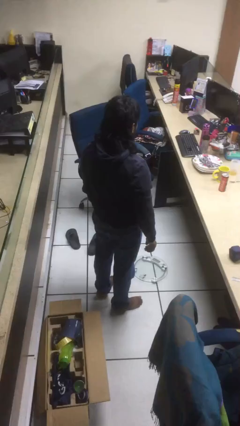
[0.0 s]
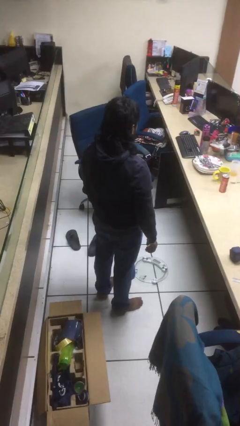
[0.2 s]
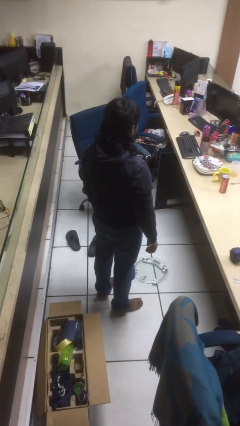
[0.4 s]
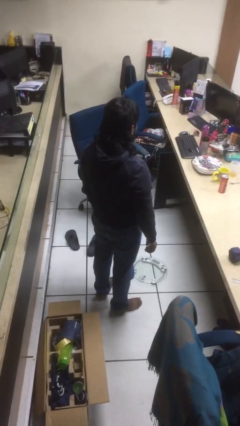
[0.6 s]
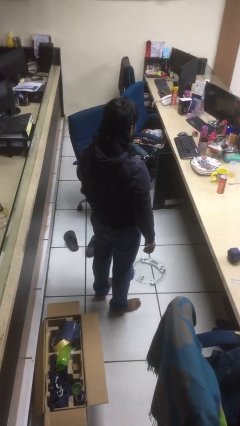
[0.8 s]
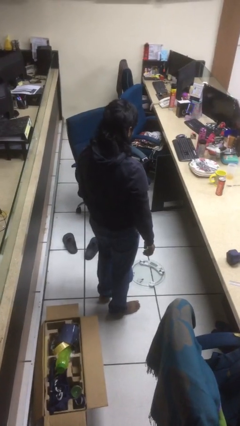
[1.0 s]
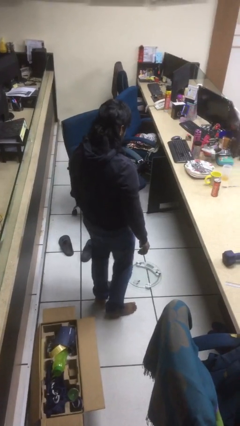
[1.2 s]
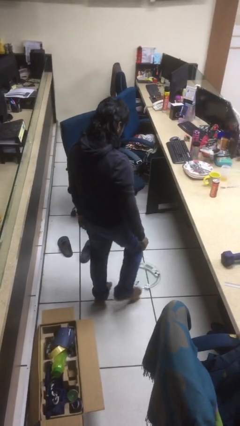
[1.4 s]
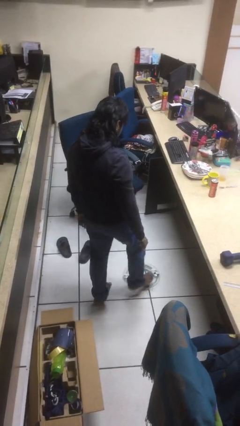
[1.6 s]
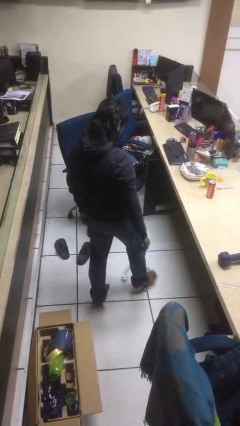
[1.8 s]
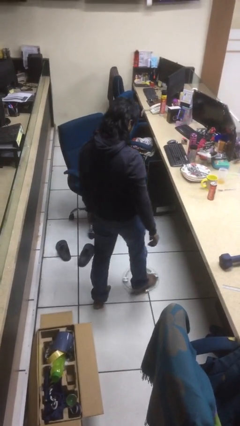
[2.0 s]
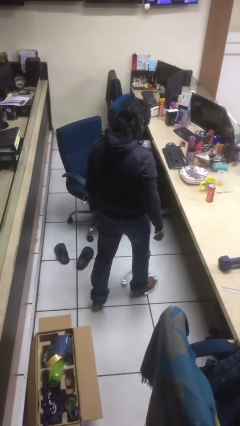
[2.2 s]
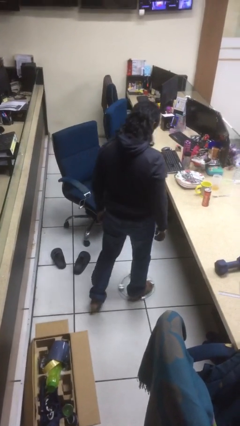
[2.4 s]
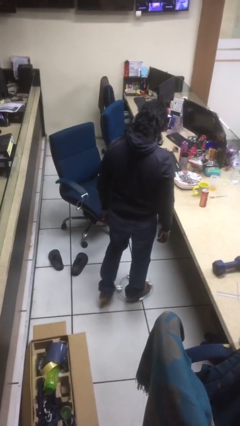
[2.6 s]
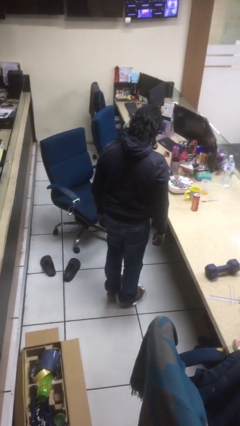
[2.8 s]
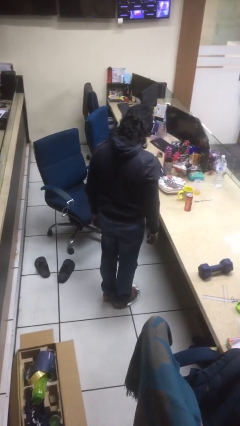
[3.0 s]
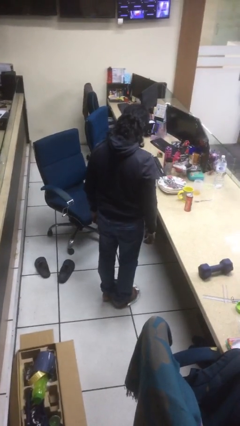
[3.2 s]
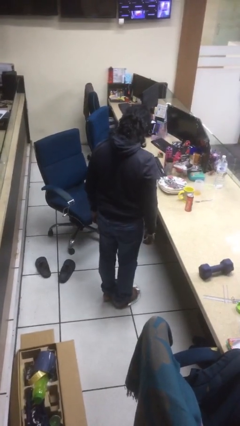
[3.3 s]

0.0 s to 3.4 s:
person uses bodyweight scale

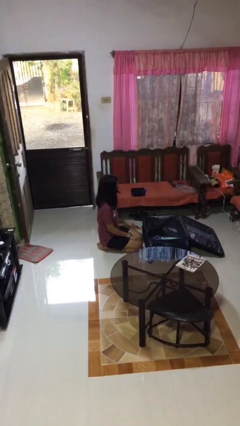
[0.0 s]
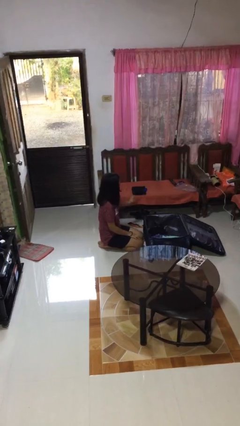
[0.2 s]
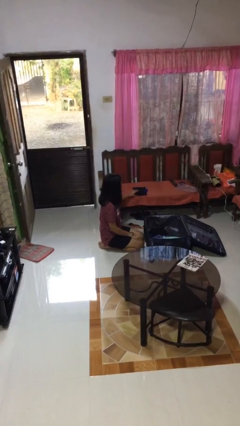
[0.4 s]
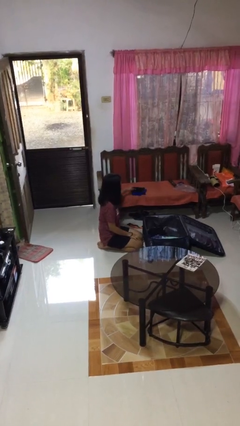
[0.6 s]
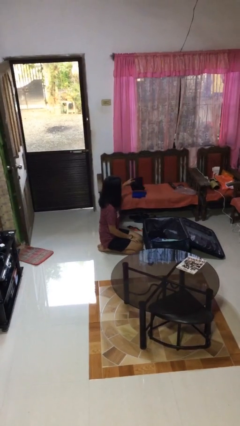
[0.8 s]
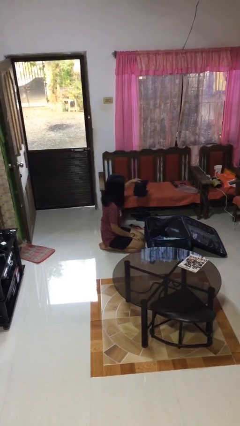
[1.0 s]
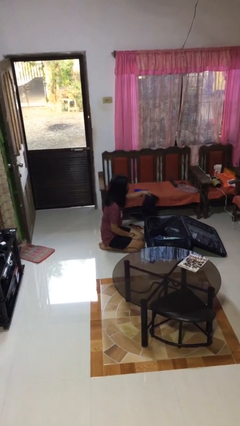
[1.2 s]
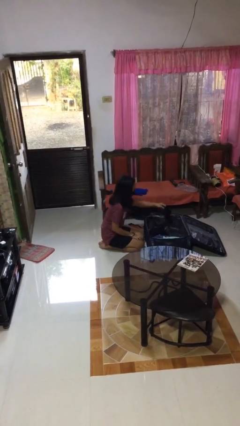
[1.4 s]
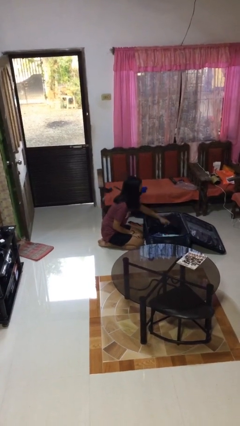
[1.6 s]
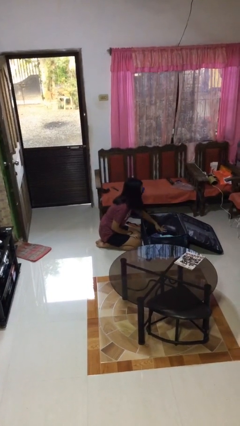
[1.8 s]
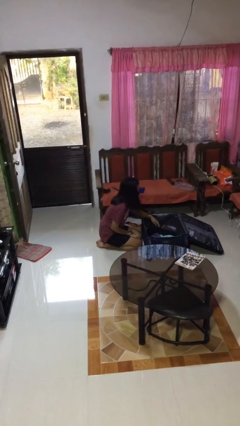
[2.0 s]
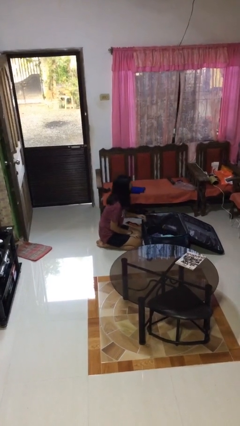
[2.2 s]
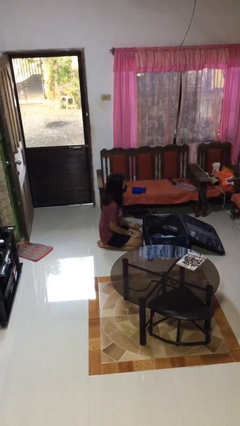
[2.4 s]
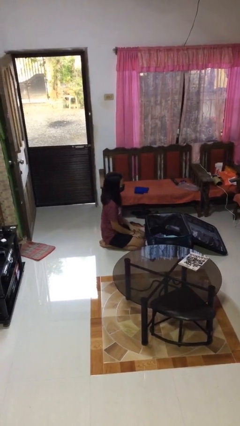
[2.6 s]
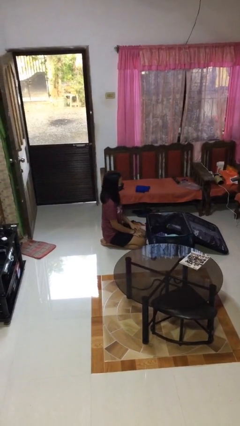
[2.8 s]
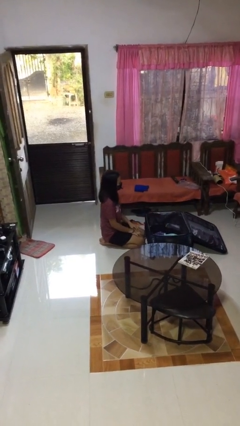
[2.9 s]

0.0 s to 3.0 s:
person loads clothes into suitcase

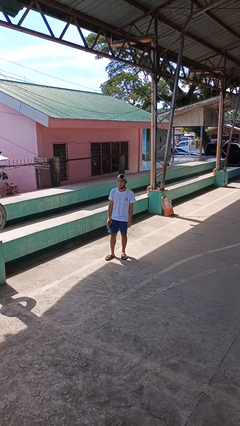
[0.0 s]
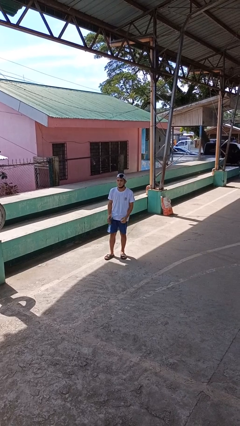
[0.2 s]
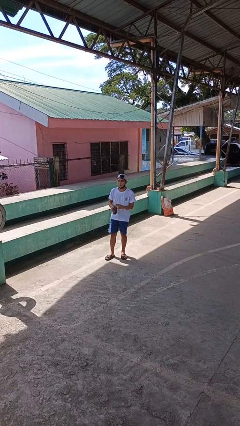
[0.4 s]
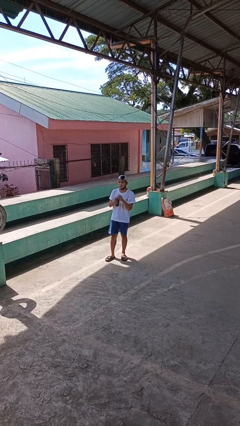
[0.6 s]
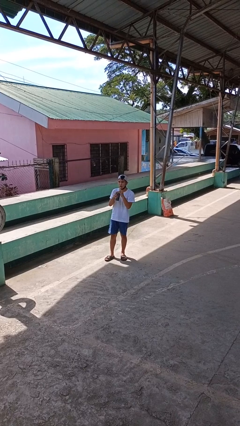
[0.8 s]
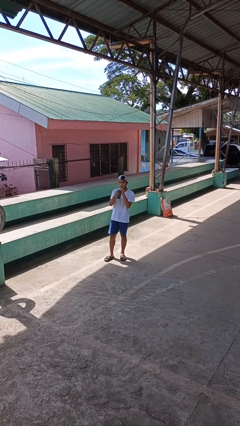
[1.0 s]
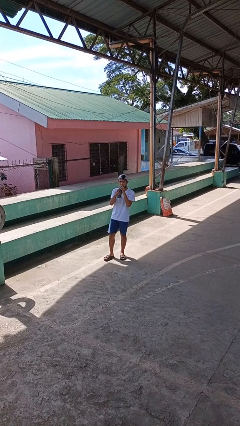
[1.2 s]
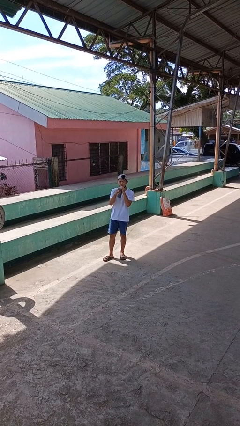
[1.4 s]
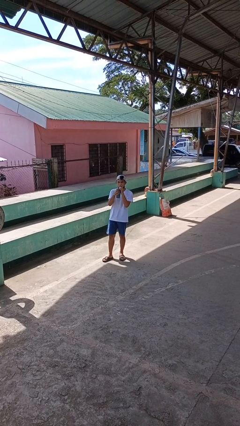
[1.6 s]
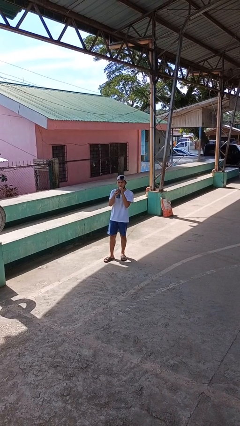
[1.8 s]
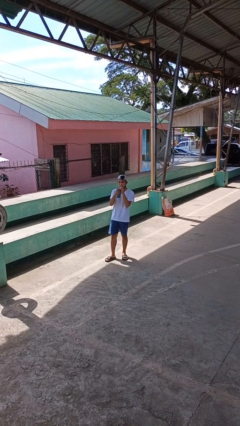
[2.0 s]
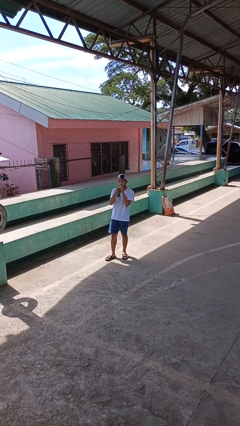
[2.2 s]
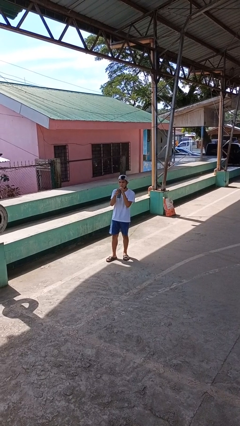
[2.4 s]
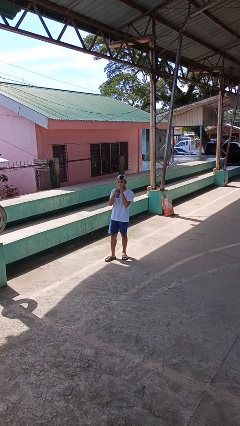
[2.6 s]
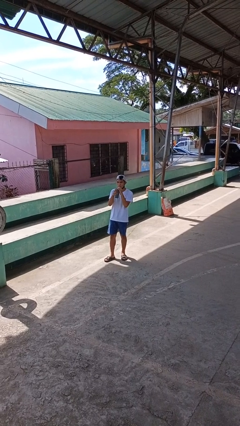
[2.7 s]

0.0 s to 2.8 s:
person drinks from straw

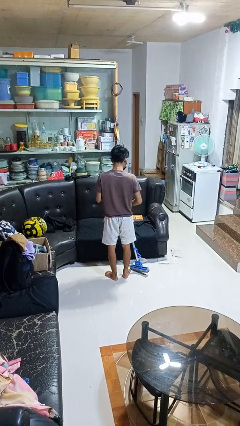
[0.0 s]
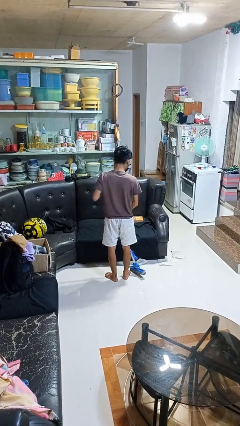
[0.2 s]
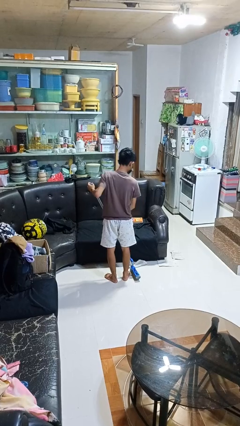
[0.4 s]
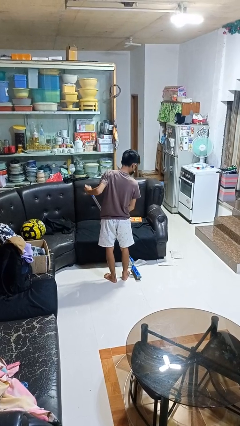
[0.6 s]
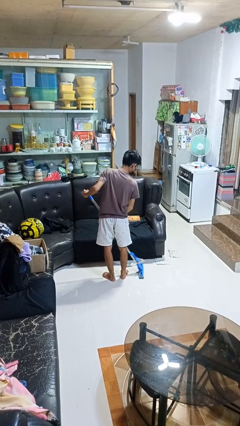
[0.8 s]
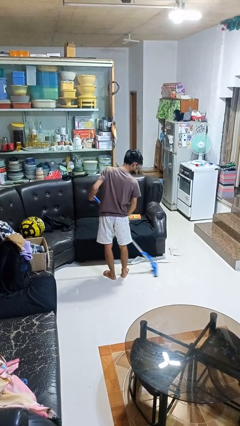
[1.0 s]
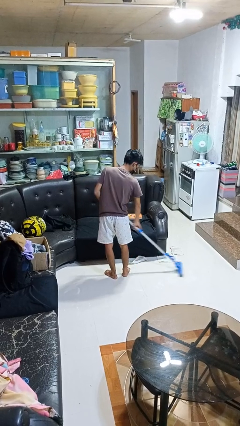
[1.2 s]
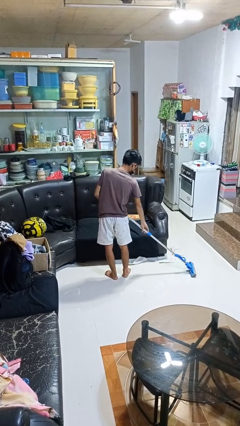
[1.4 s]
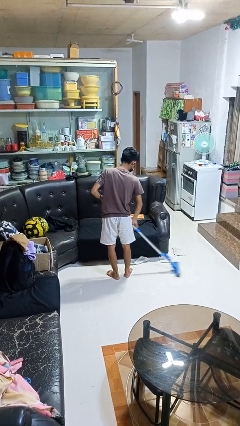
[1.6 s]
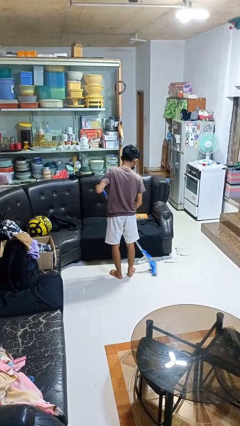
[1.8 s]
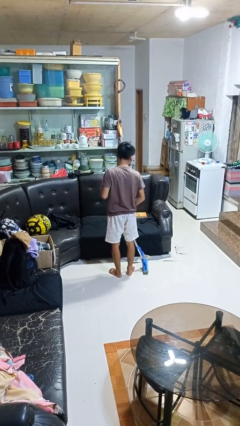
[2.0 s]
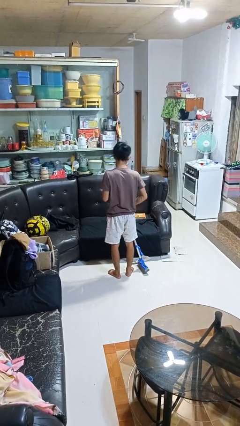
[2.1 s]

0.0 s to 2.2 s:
person mops

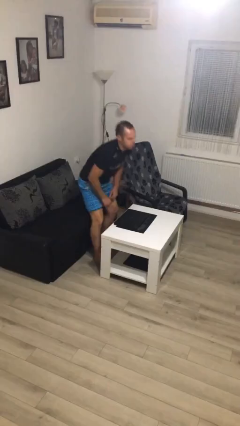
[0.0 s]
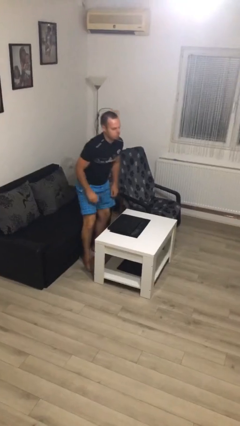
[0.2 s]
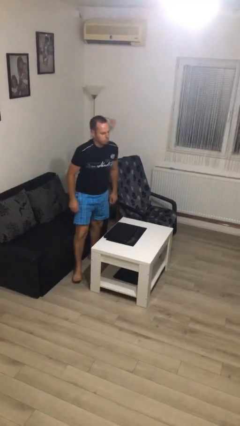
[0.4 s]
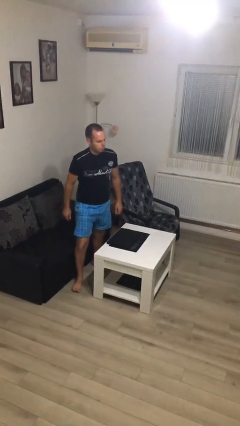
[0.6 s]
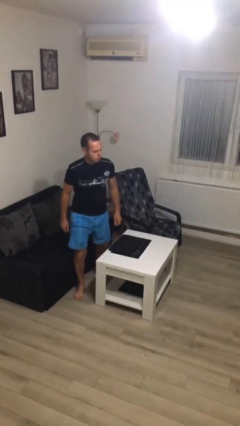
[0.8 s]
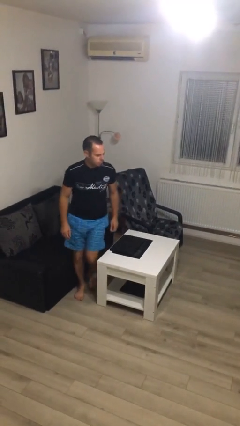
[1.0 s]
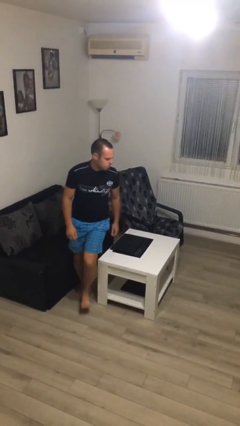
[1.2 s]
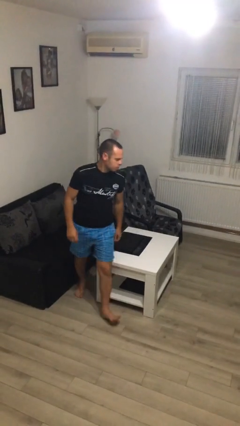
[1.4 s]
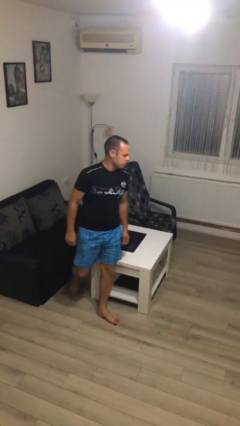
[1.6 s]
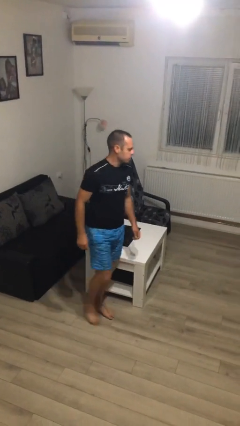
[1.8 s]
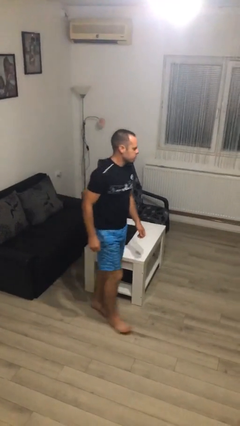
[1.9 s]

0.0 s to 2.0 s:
person stands up

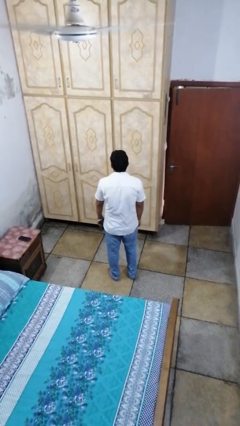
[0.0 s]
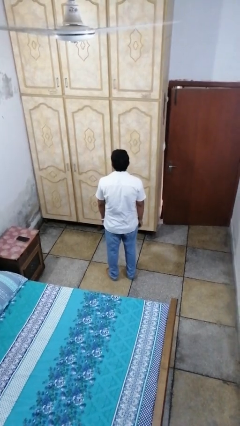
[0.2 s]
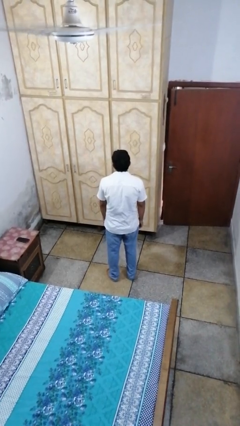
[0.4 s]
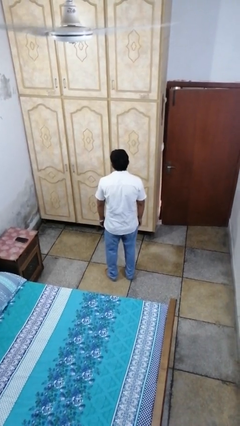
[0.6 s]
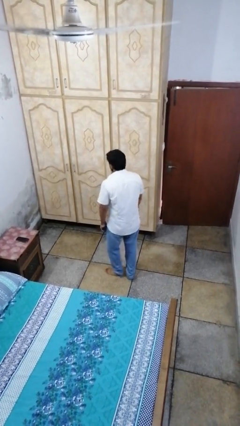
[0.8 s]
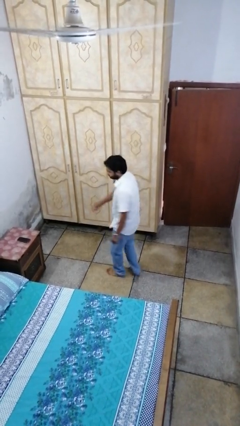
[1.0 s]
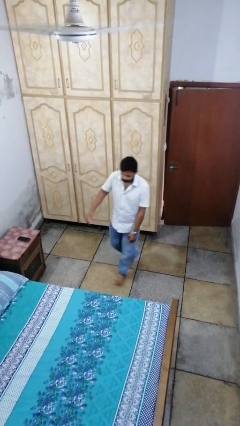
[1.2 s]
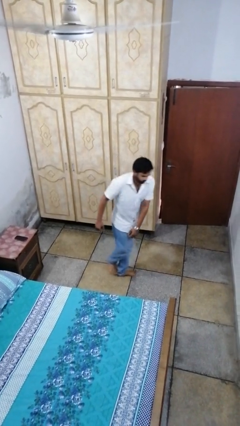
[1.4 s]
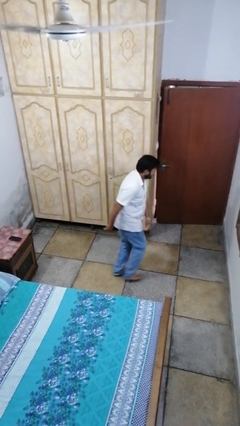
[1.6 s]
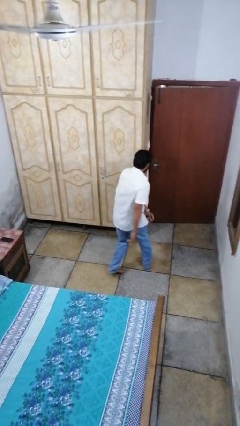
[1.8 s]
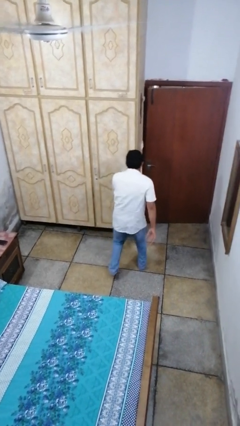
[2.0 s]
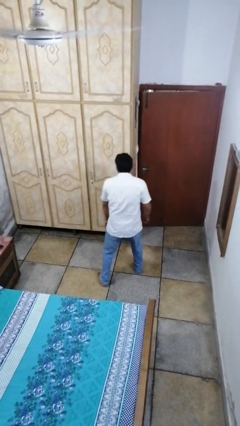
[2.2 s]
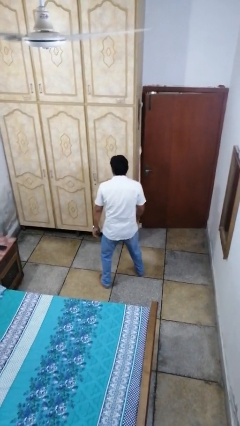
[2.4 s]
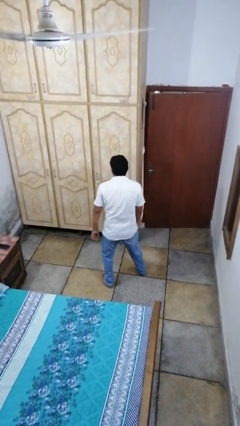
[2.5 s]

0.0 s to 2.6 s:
person twirls

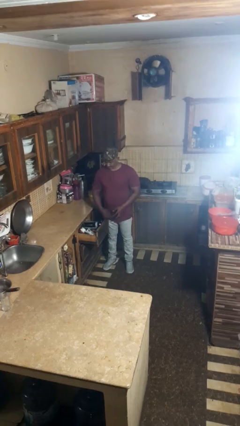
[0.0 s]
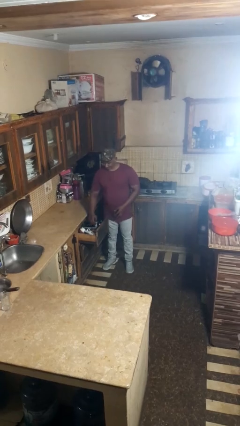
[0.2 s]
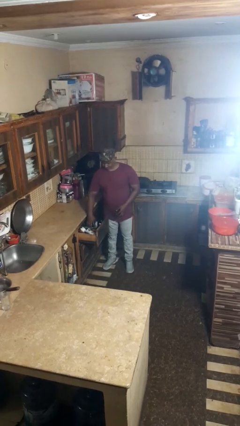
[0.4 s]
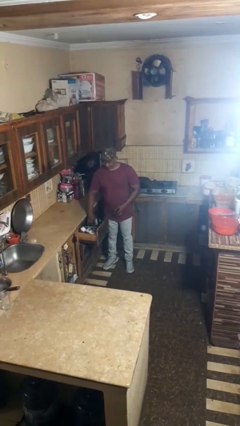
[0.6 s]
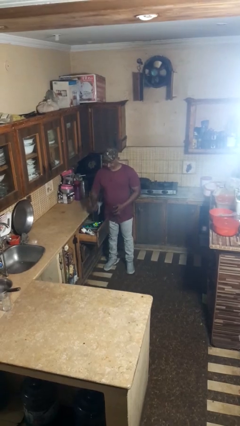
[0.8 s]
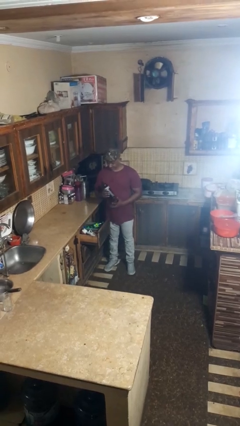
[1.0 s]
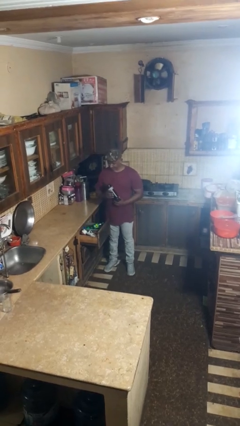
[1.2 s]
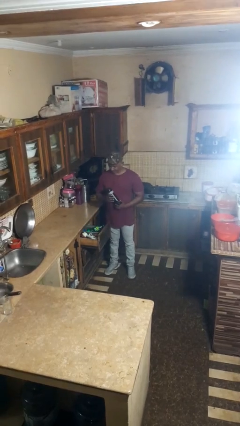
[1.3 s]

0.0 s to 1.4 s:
person takes object from kitchen drawer
